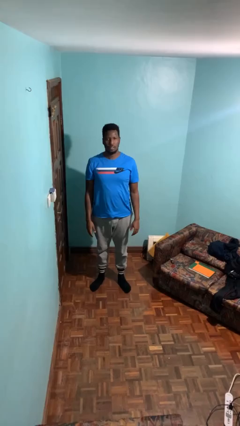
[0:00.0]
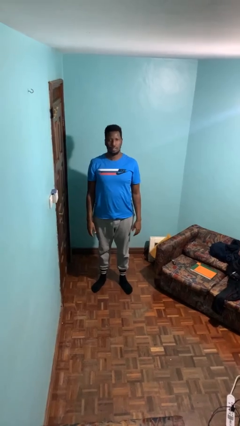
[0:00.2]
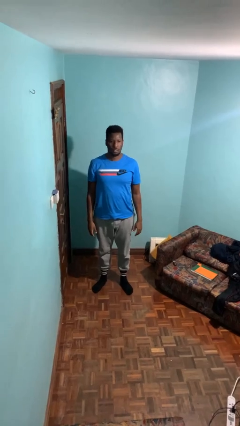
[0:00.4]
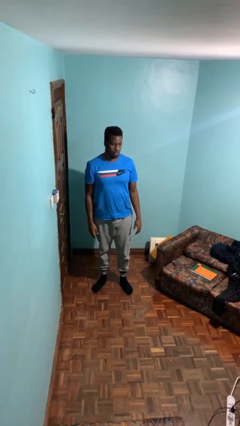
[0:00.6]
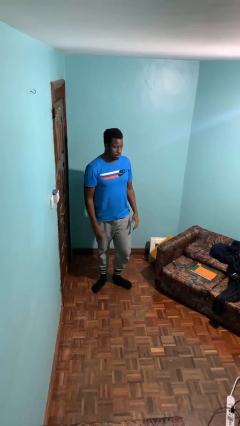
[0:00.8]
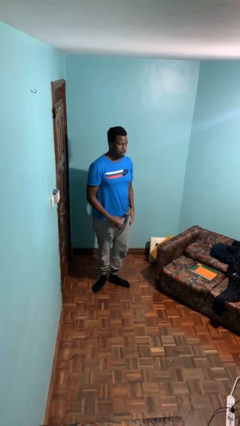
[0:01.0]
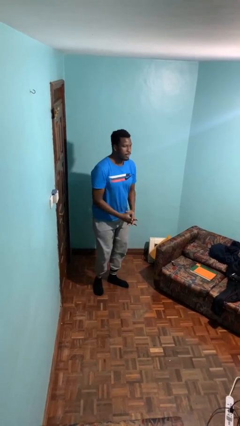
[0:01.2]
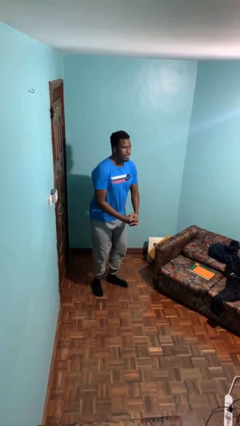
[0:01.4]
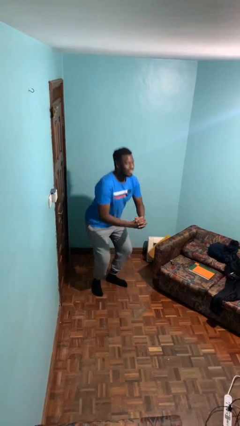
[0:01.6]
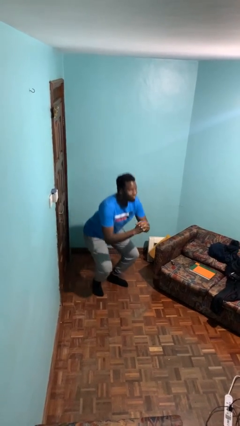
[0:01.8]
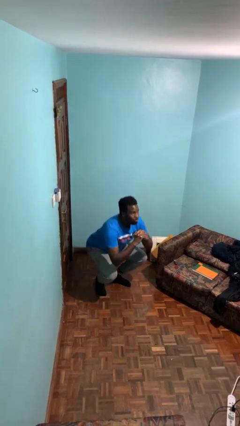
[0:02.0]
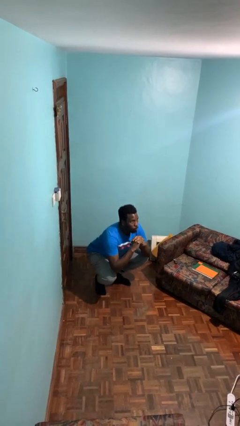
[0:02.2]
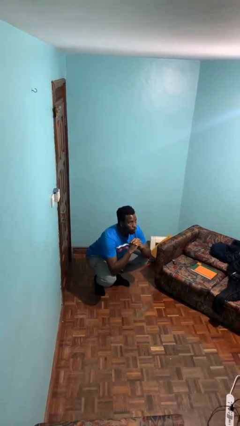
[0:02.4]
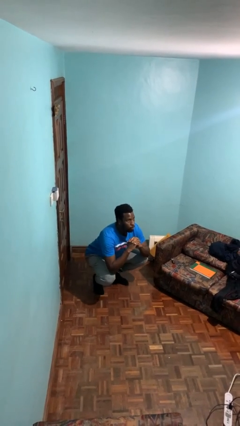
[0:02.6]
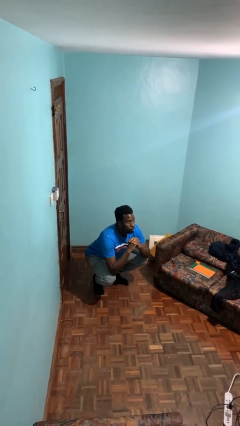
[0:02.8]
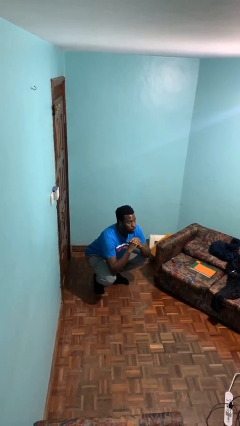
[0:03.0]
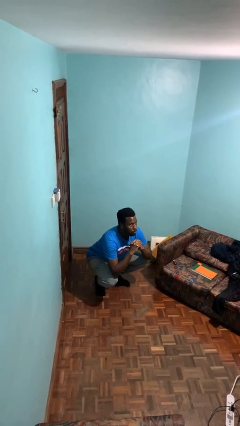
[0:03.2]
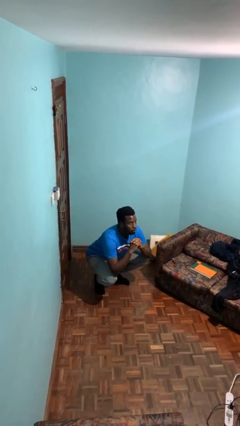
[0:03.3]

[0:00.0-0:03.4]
person squats

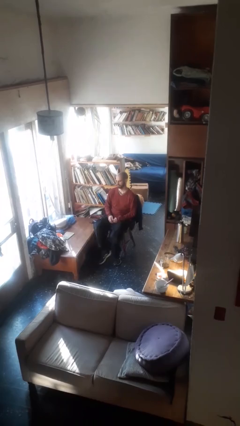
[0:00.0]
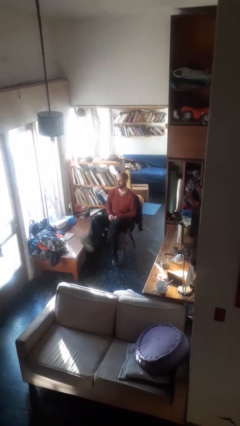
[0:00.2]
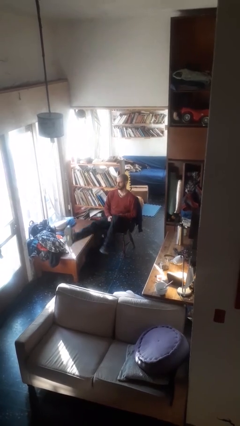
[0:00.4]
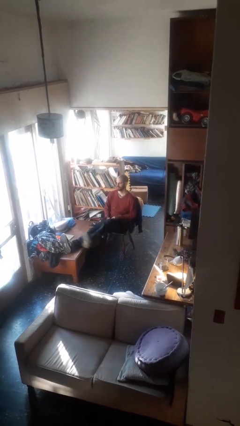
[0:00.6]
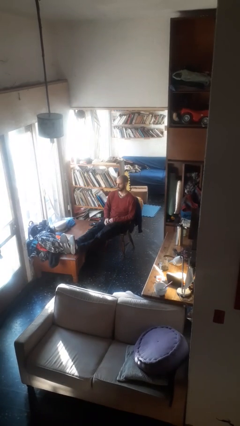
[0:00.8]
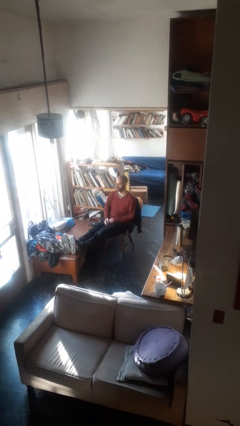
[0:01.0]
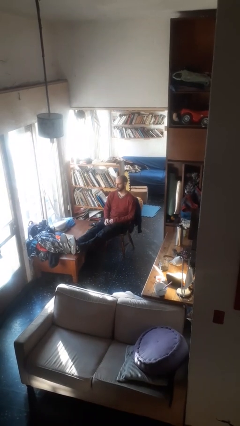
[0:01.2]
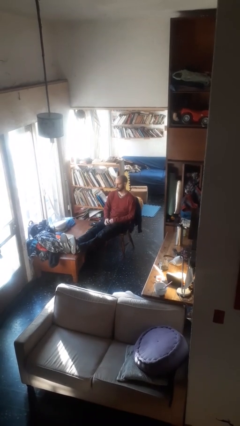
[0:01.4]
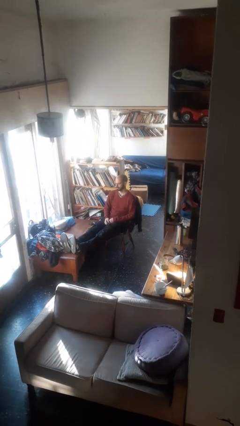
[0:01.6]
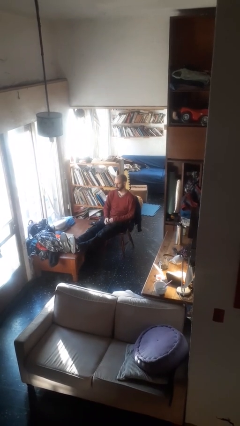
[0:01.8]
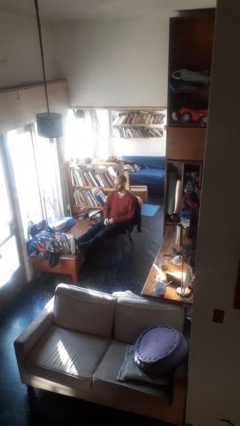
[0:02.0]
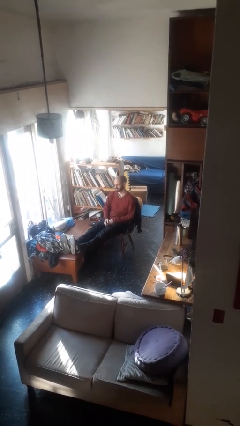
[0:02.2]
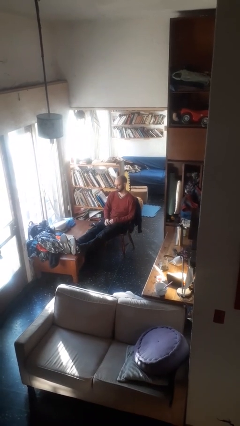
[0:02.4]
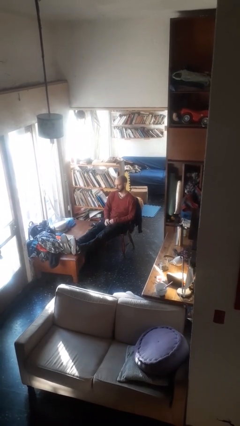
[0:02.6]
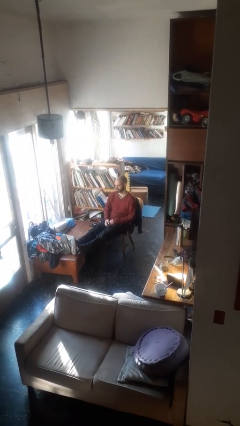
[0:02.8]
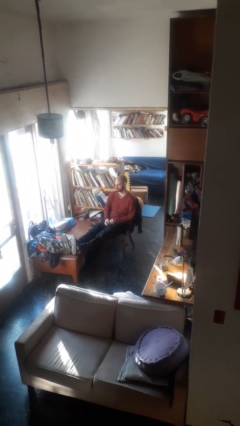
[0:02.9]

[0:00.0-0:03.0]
person puts feet up

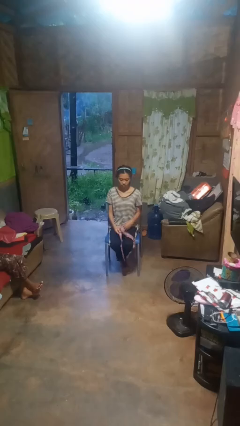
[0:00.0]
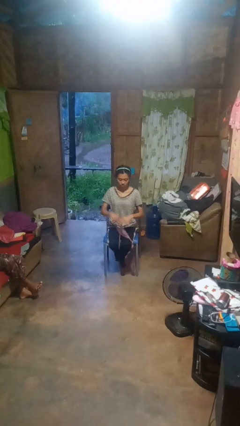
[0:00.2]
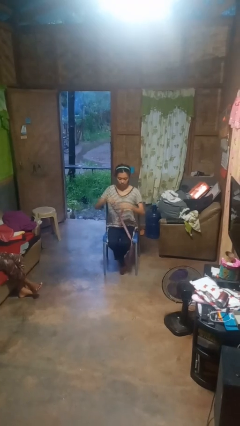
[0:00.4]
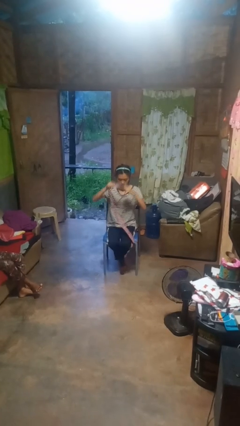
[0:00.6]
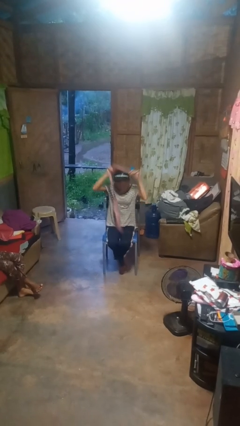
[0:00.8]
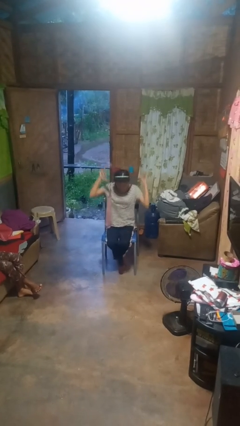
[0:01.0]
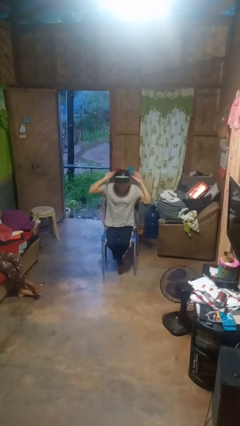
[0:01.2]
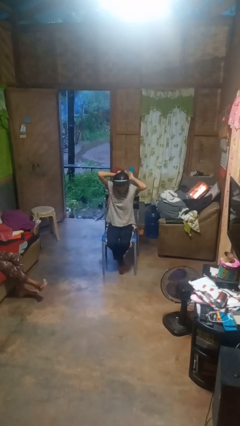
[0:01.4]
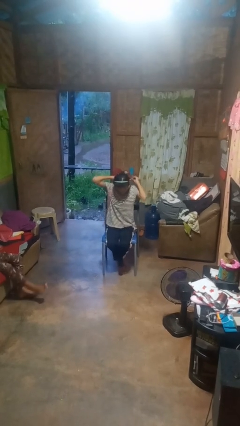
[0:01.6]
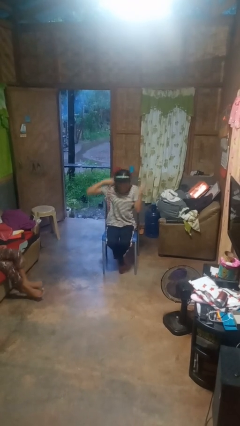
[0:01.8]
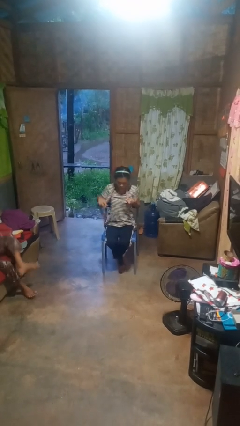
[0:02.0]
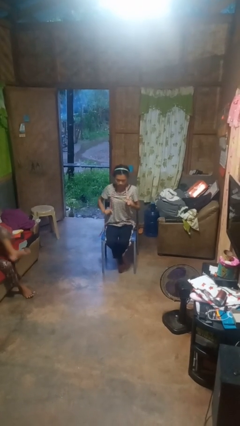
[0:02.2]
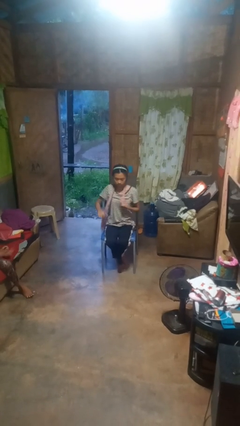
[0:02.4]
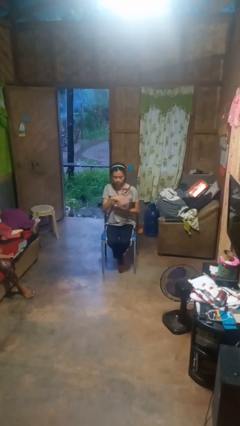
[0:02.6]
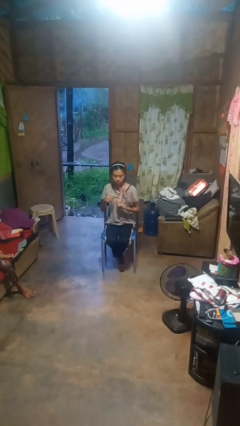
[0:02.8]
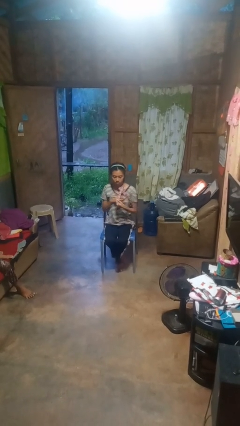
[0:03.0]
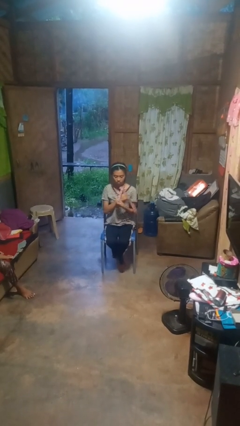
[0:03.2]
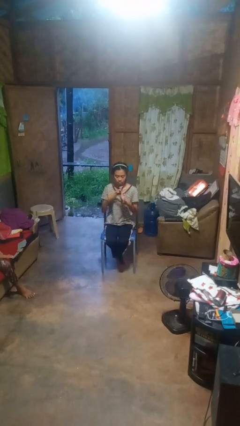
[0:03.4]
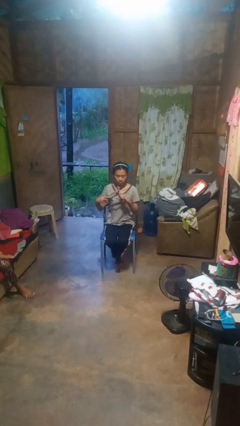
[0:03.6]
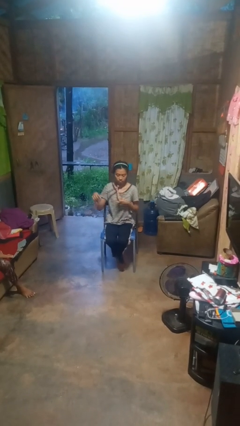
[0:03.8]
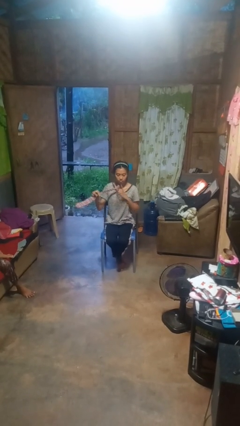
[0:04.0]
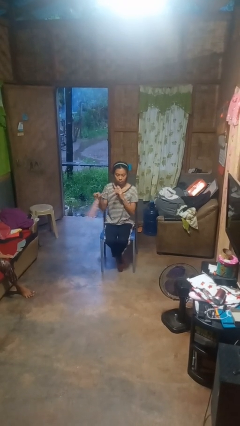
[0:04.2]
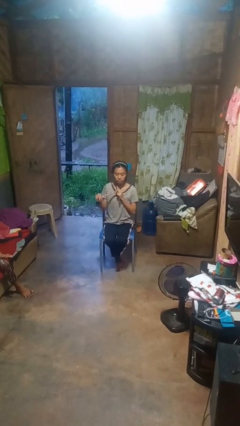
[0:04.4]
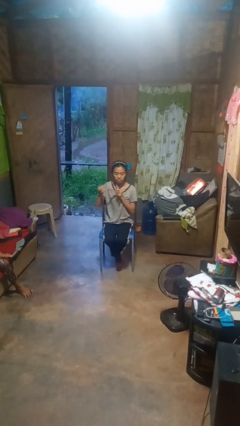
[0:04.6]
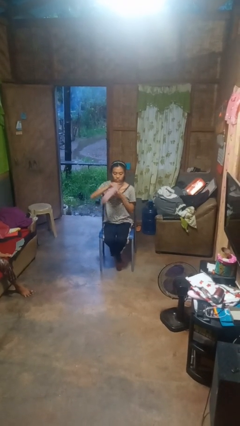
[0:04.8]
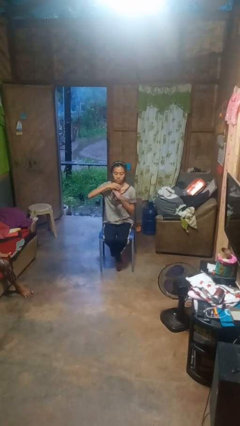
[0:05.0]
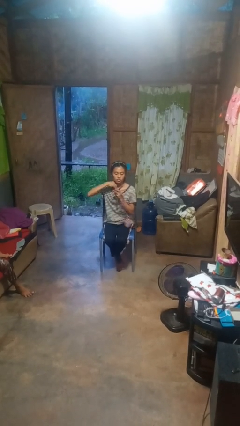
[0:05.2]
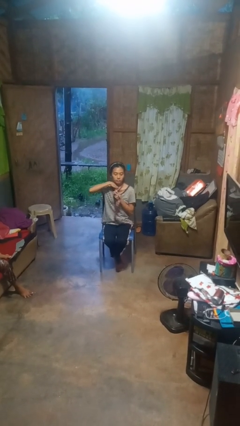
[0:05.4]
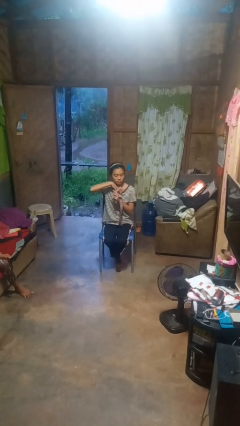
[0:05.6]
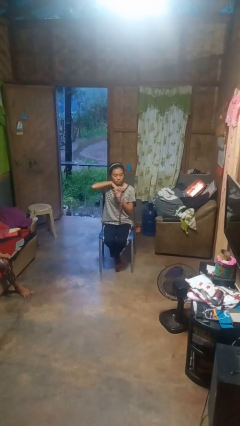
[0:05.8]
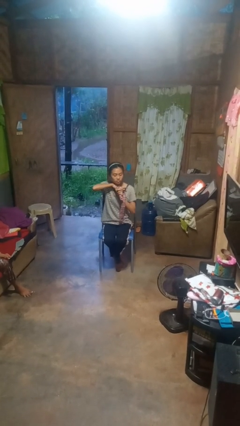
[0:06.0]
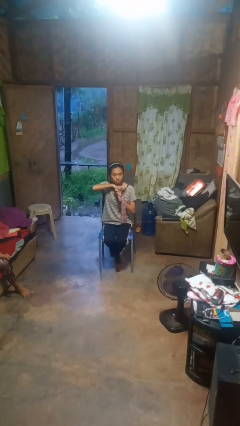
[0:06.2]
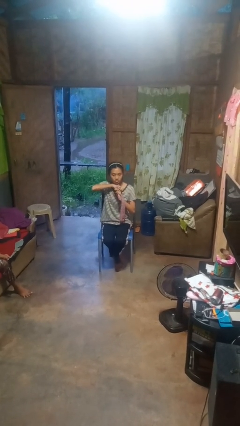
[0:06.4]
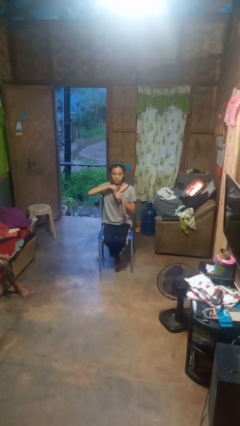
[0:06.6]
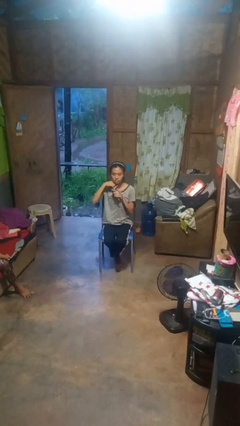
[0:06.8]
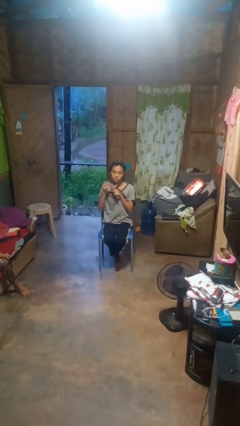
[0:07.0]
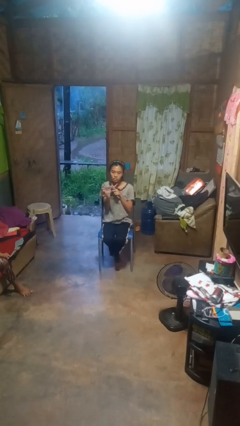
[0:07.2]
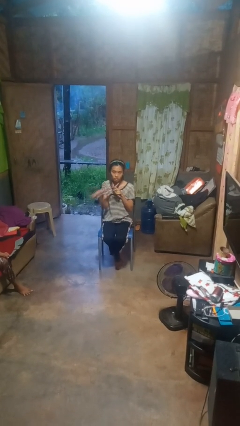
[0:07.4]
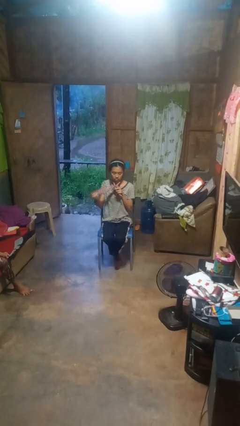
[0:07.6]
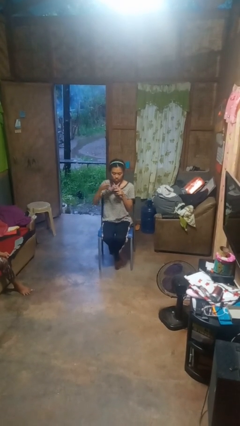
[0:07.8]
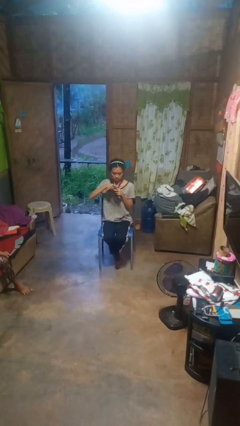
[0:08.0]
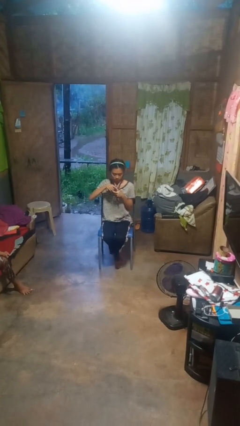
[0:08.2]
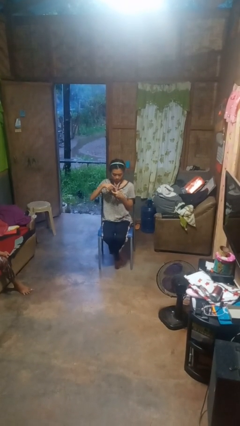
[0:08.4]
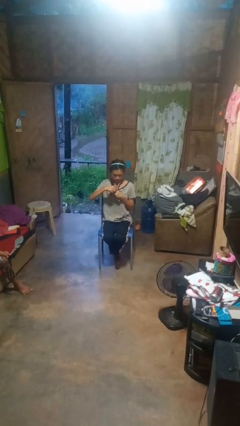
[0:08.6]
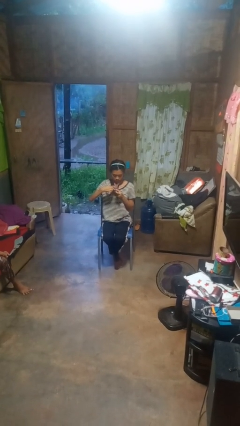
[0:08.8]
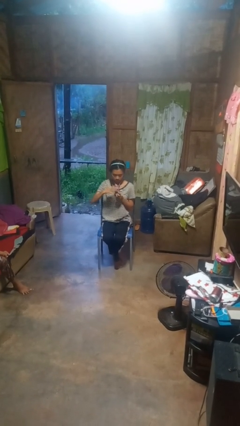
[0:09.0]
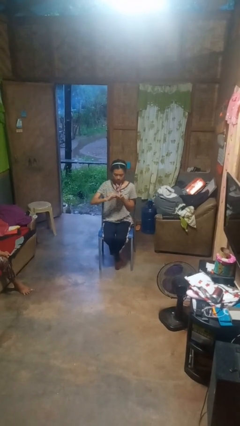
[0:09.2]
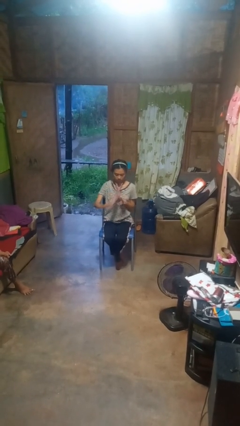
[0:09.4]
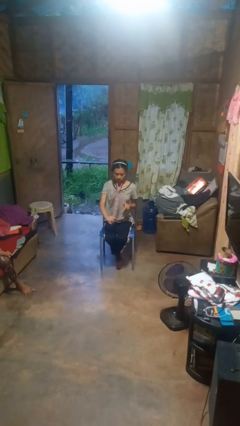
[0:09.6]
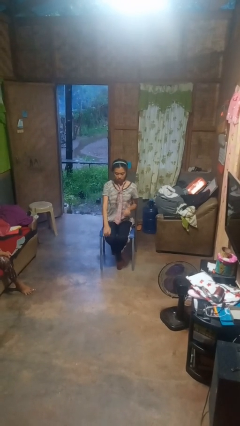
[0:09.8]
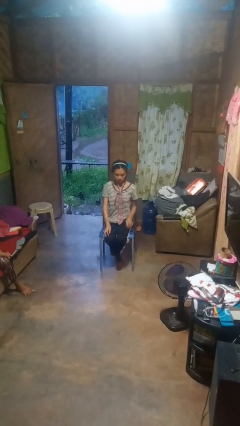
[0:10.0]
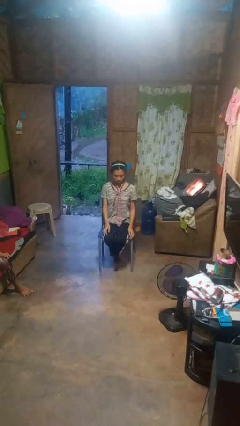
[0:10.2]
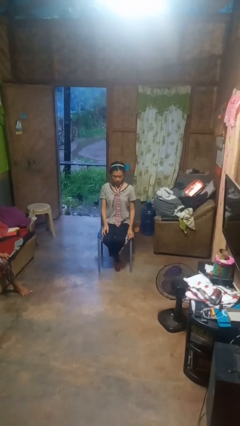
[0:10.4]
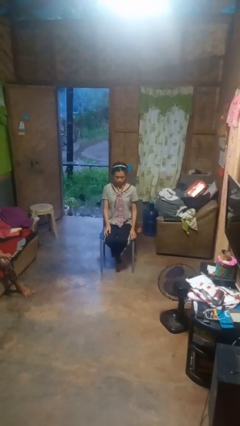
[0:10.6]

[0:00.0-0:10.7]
person puts on necktie

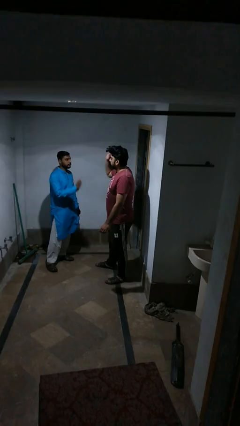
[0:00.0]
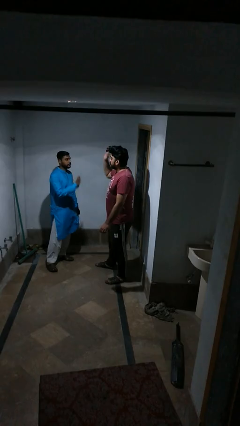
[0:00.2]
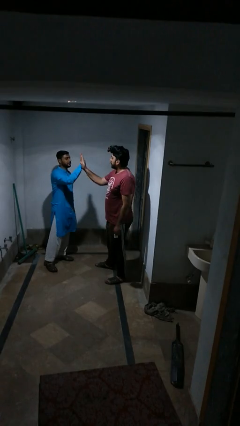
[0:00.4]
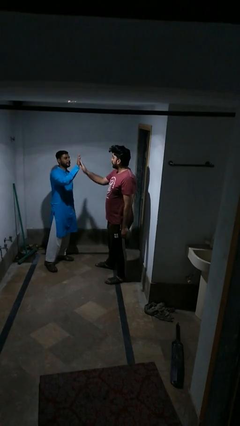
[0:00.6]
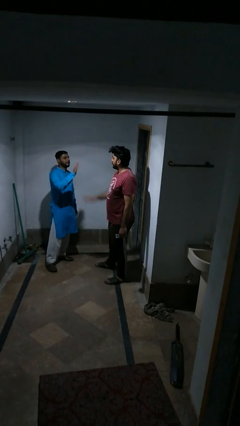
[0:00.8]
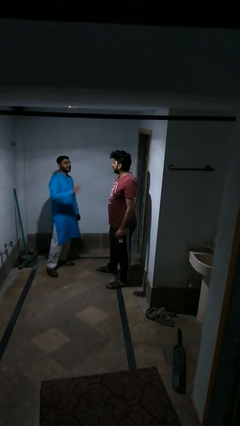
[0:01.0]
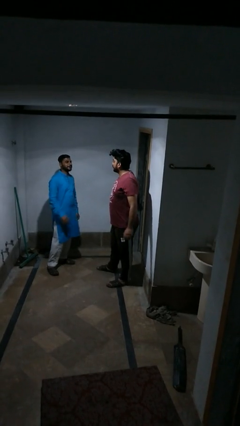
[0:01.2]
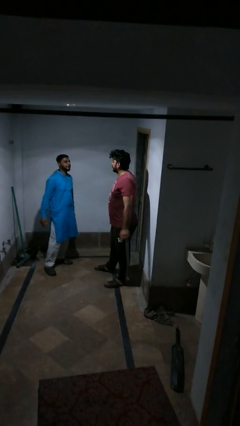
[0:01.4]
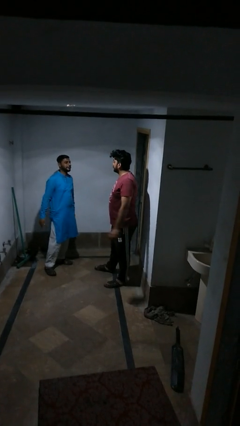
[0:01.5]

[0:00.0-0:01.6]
person highfives hand
